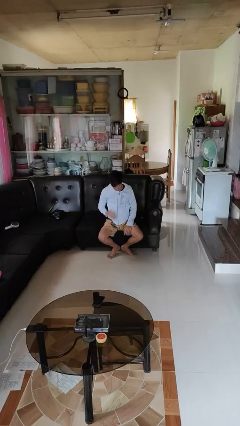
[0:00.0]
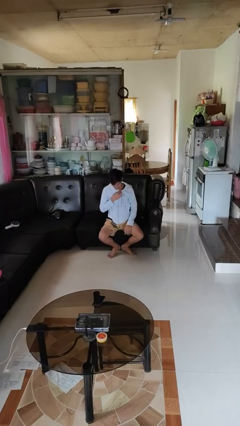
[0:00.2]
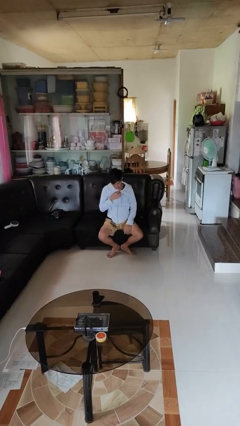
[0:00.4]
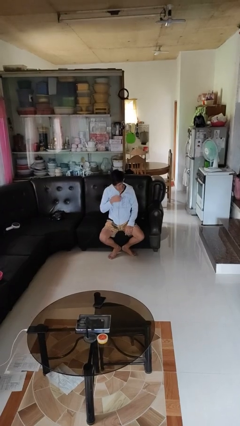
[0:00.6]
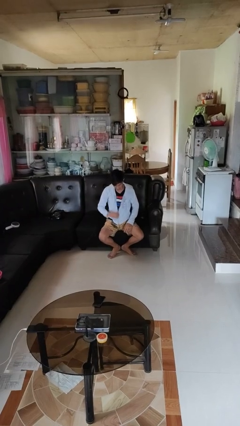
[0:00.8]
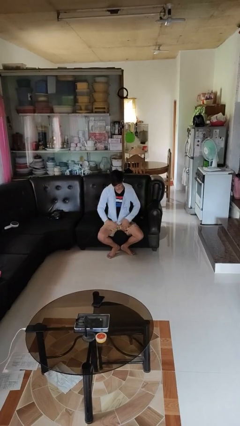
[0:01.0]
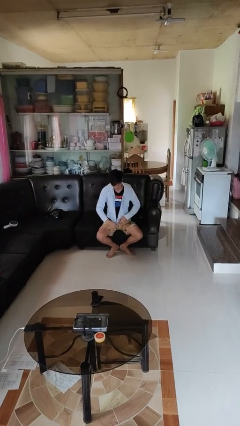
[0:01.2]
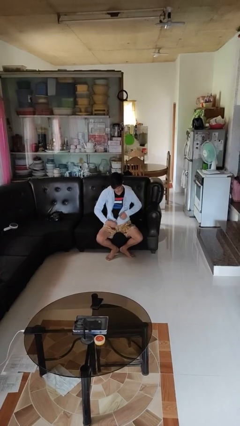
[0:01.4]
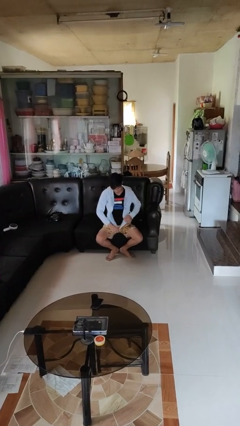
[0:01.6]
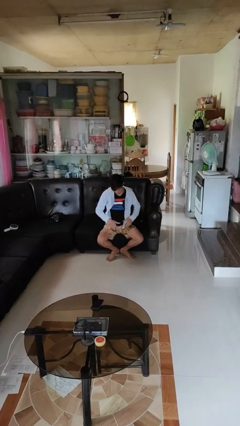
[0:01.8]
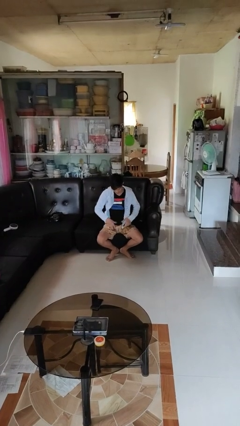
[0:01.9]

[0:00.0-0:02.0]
person unzips jacket

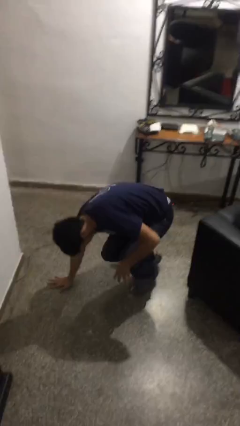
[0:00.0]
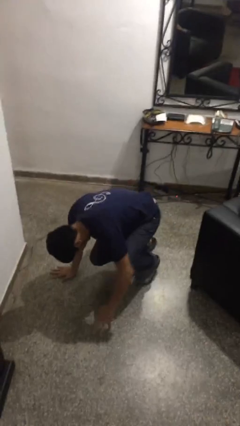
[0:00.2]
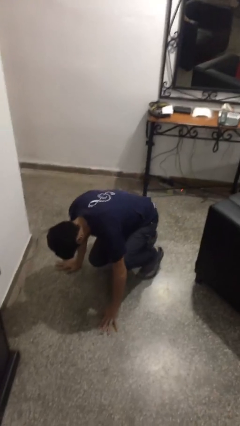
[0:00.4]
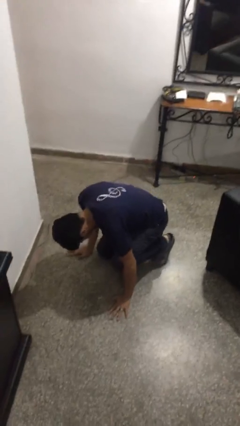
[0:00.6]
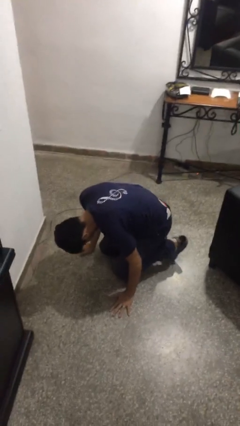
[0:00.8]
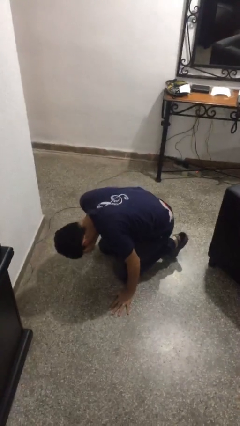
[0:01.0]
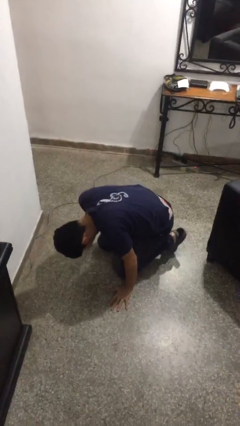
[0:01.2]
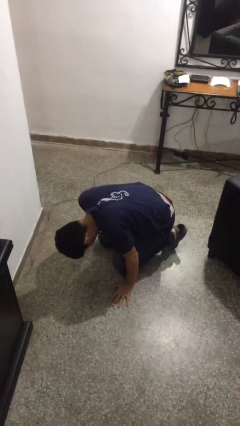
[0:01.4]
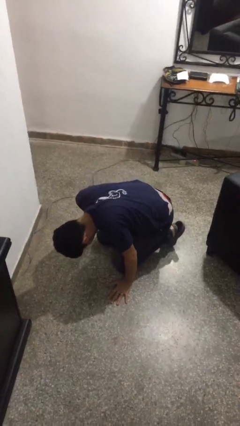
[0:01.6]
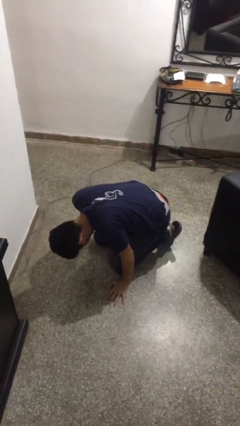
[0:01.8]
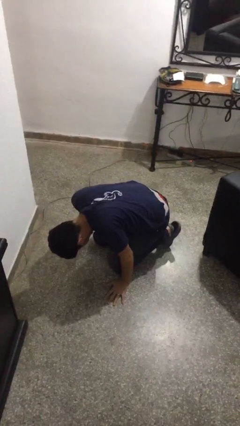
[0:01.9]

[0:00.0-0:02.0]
person lies down on floor

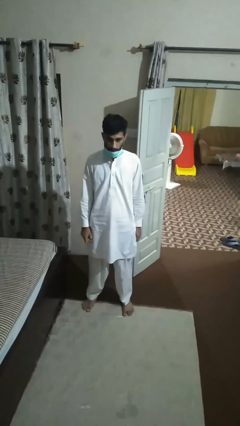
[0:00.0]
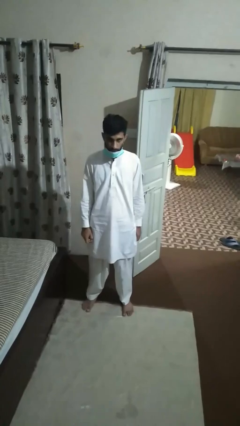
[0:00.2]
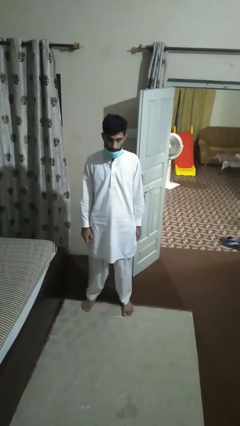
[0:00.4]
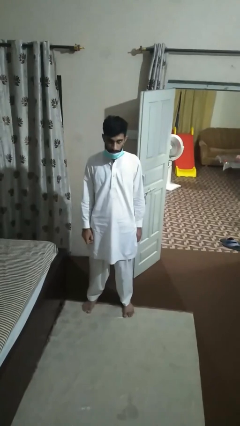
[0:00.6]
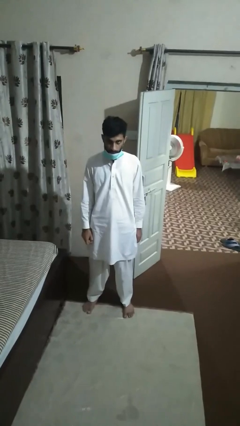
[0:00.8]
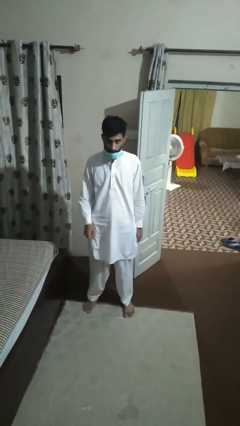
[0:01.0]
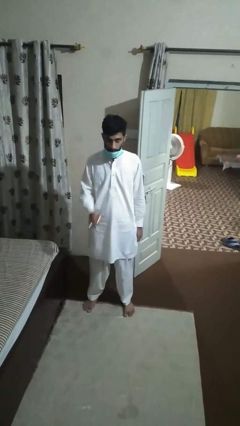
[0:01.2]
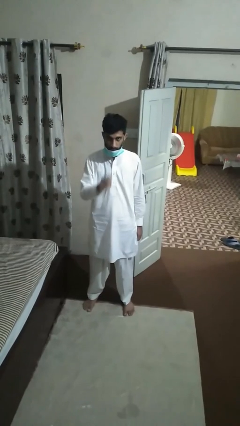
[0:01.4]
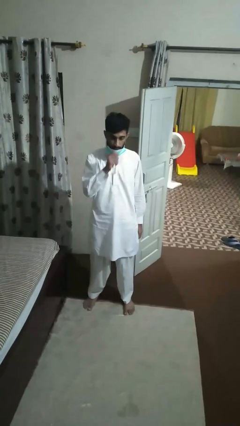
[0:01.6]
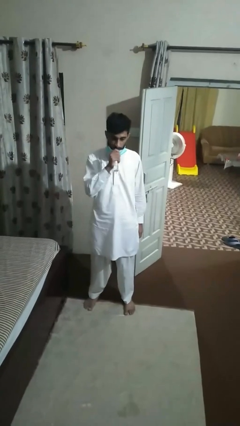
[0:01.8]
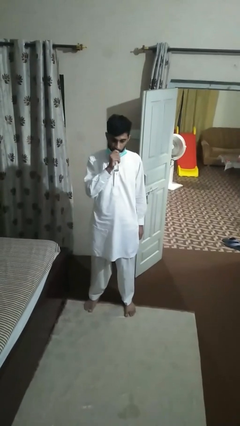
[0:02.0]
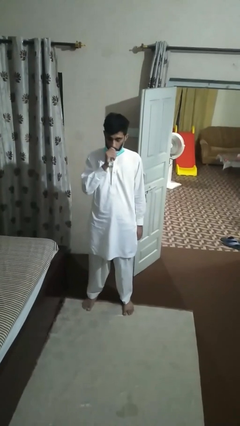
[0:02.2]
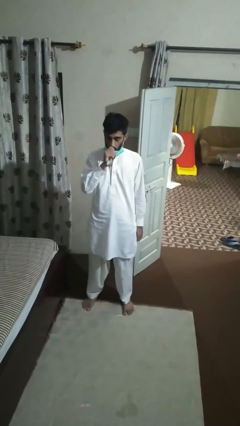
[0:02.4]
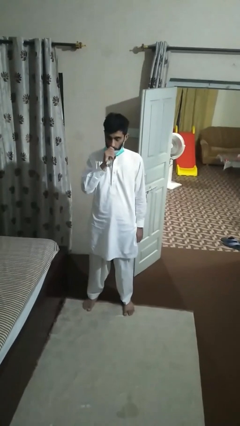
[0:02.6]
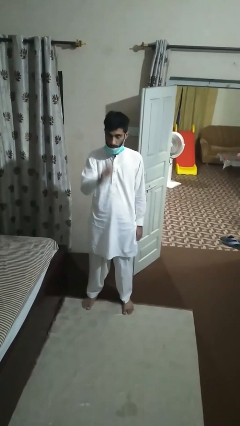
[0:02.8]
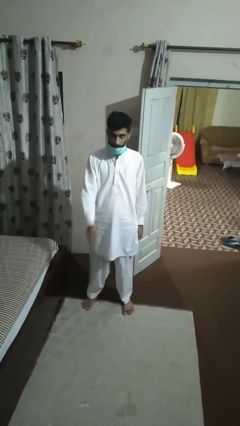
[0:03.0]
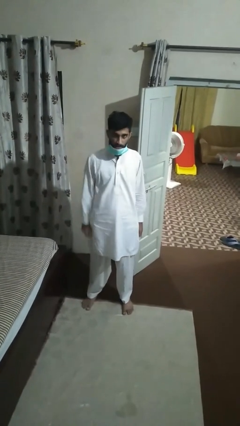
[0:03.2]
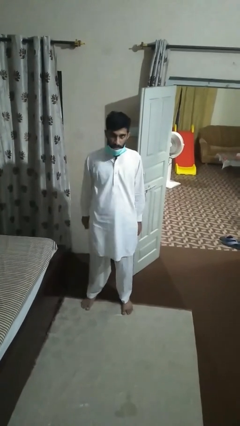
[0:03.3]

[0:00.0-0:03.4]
person vapes

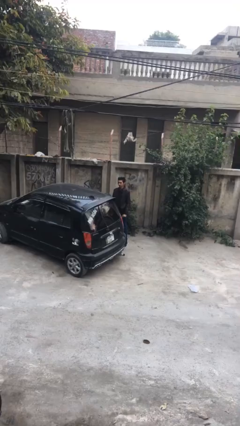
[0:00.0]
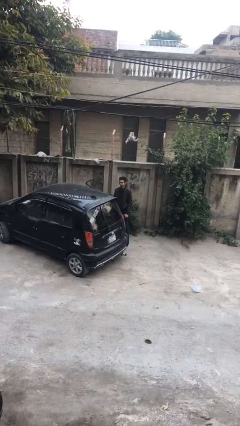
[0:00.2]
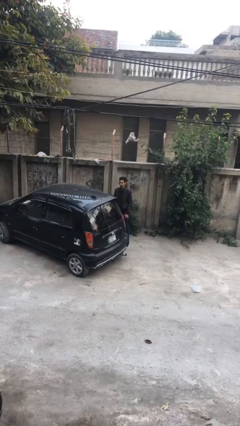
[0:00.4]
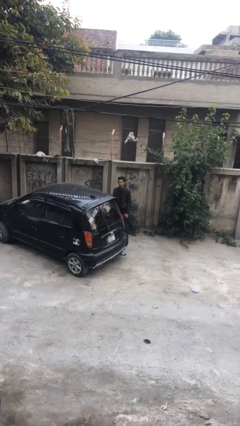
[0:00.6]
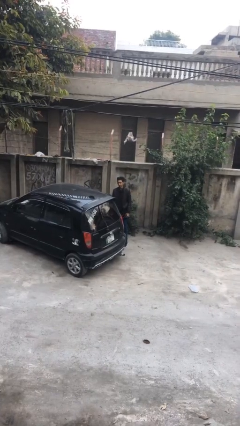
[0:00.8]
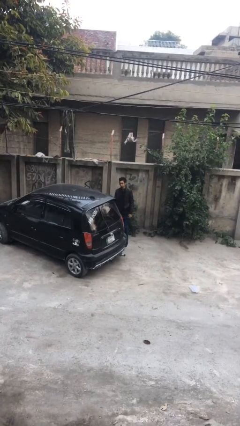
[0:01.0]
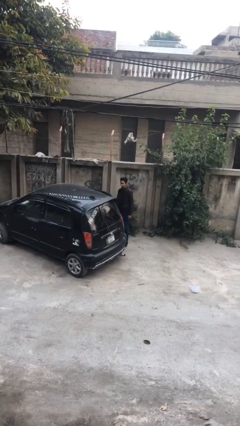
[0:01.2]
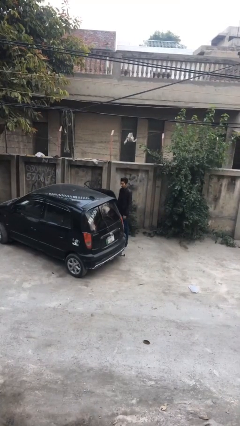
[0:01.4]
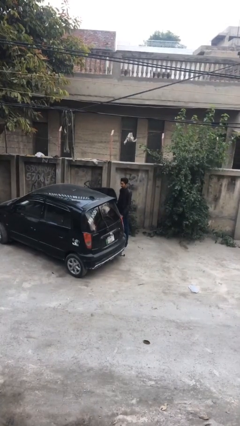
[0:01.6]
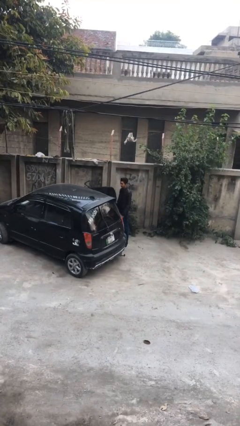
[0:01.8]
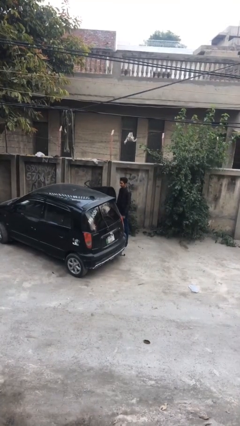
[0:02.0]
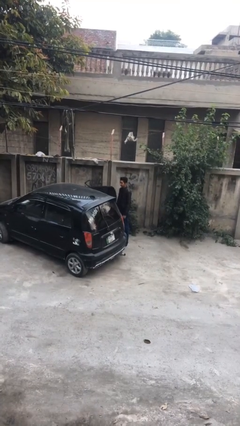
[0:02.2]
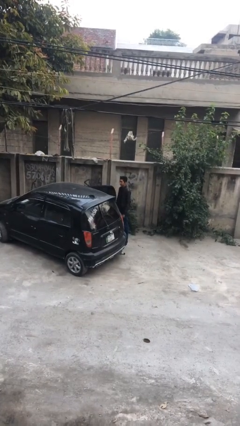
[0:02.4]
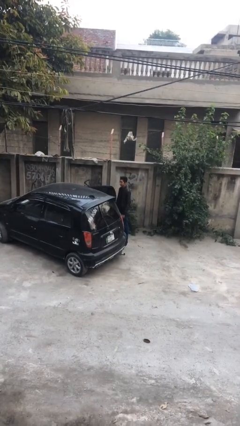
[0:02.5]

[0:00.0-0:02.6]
person opens car door

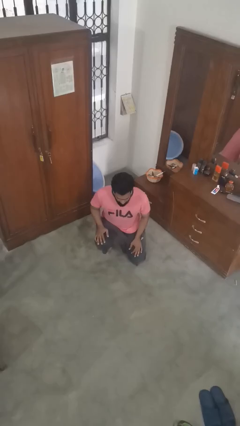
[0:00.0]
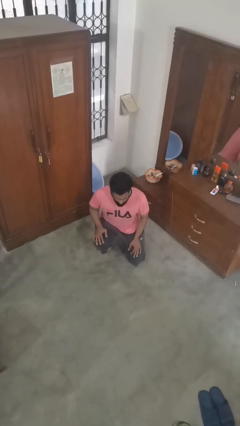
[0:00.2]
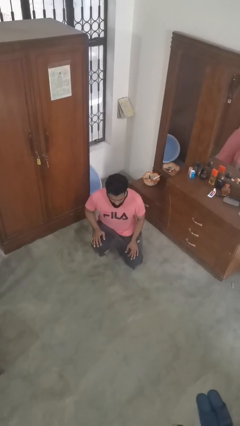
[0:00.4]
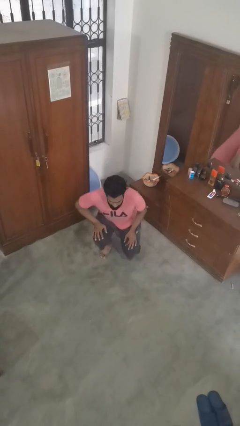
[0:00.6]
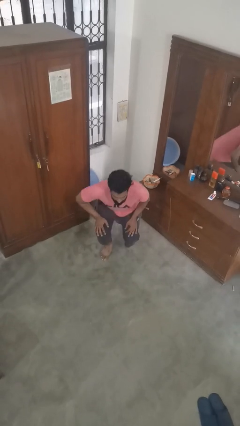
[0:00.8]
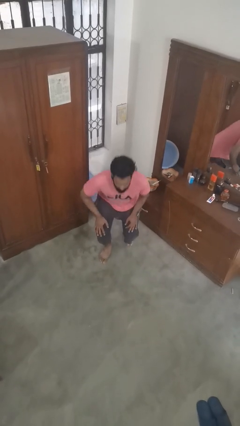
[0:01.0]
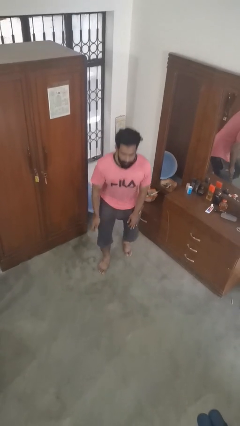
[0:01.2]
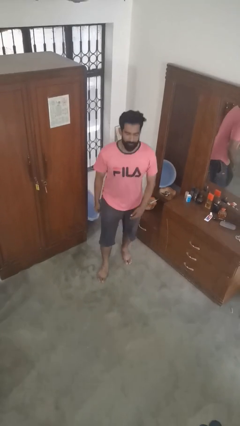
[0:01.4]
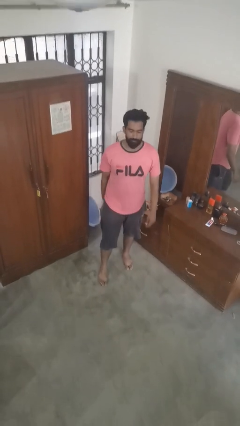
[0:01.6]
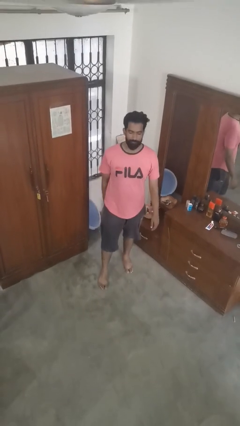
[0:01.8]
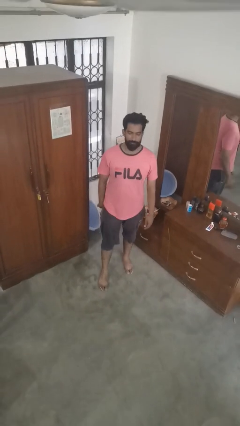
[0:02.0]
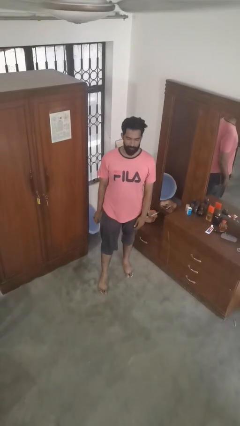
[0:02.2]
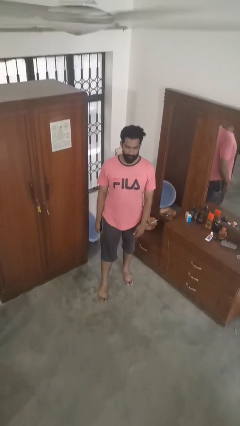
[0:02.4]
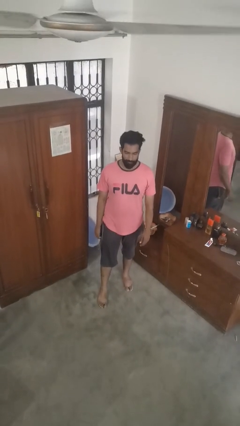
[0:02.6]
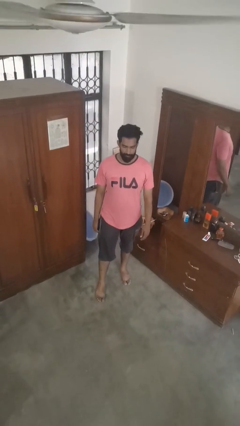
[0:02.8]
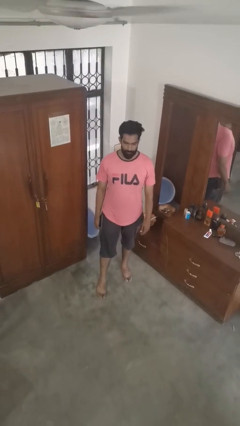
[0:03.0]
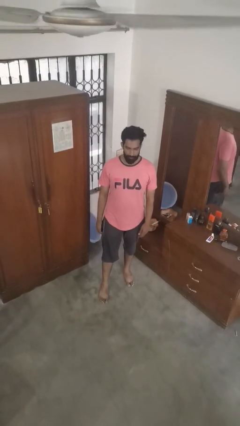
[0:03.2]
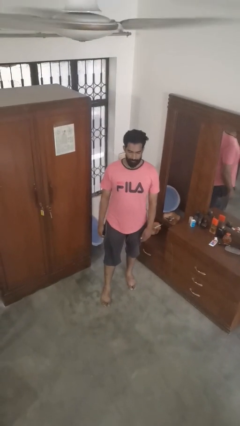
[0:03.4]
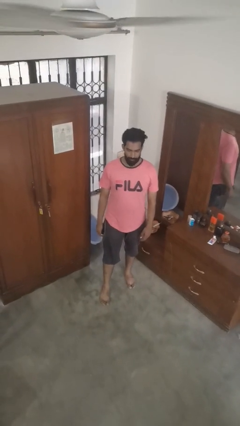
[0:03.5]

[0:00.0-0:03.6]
person stands up from floor

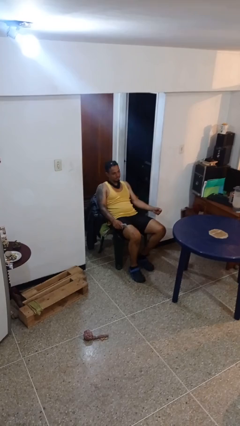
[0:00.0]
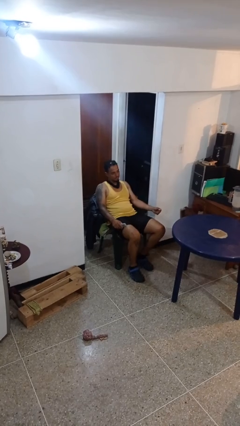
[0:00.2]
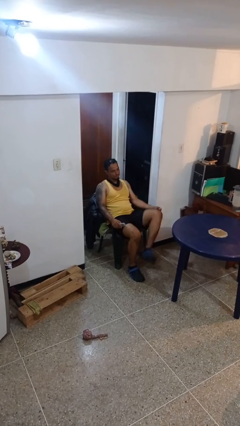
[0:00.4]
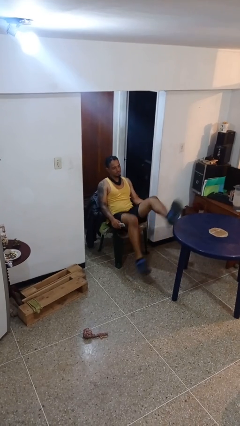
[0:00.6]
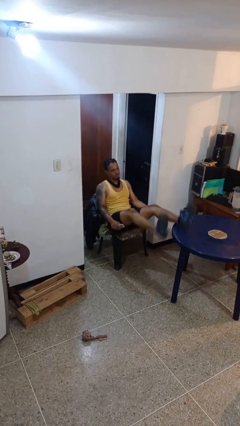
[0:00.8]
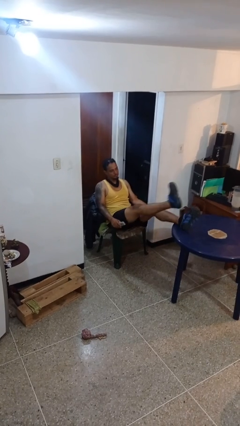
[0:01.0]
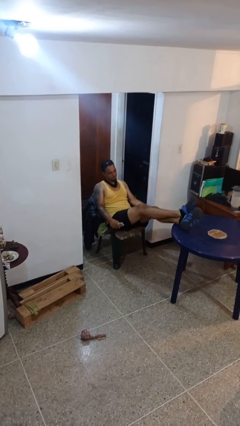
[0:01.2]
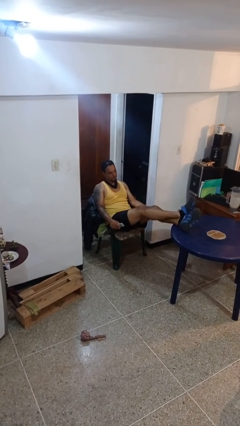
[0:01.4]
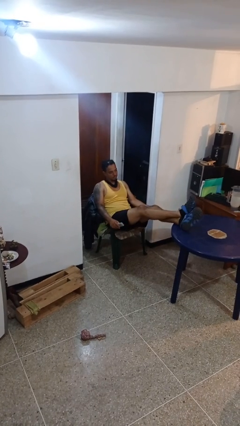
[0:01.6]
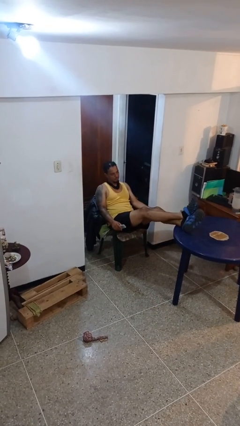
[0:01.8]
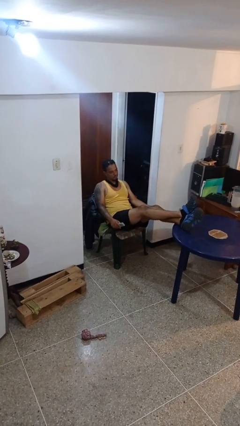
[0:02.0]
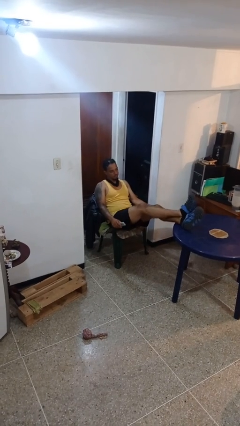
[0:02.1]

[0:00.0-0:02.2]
person puts feet up

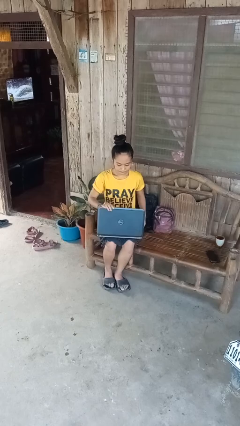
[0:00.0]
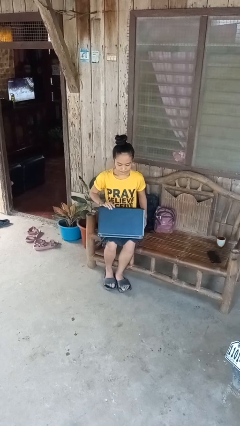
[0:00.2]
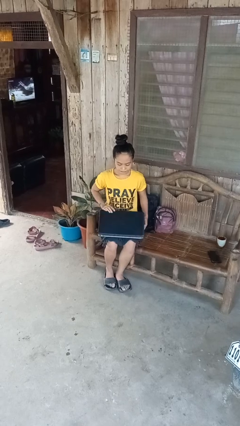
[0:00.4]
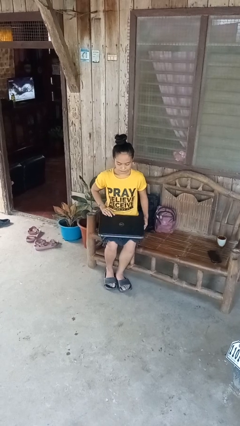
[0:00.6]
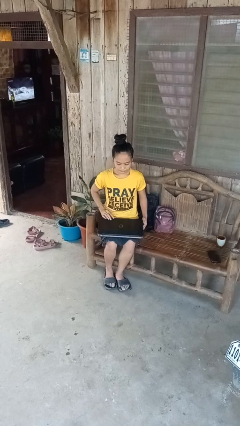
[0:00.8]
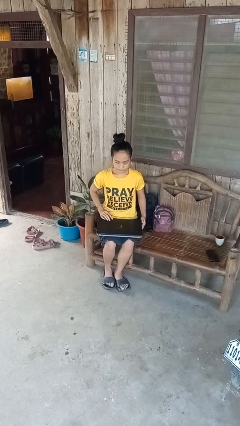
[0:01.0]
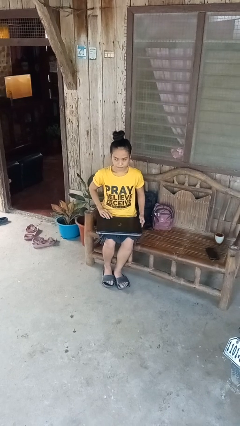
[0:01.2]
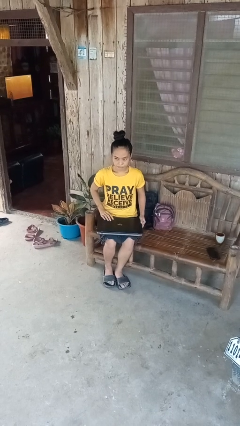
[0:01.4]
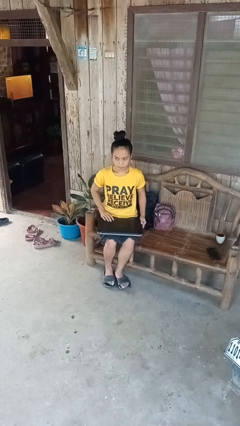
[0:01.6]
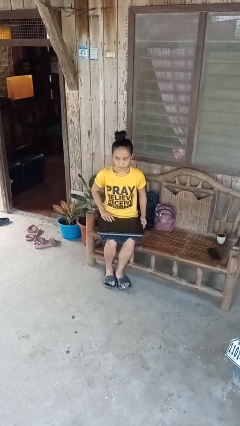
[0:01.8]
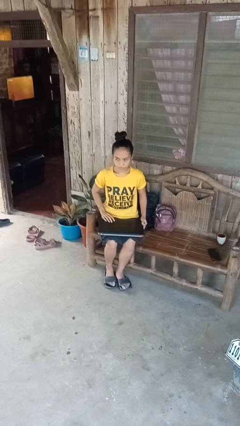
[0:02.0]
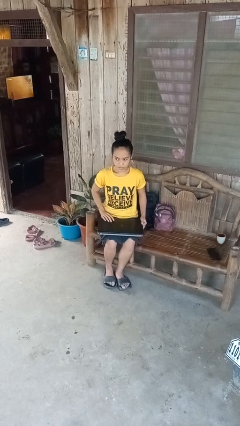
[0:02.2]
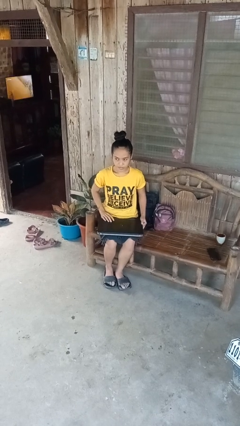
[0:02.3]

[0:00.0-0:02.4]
person closes laptop
